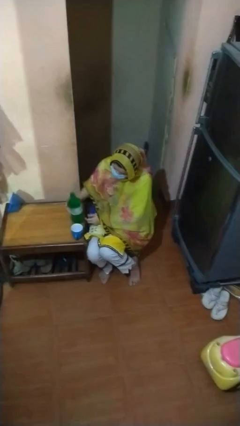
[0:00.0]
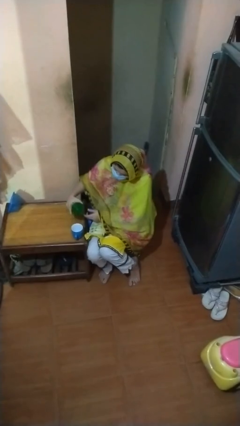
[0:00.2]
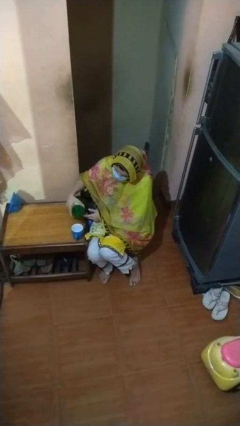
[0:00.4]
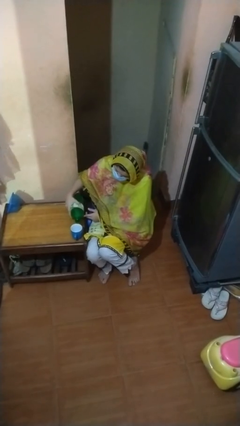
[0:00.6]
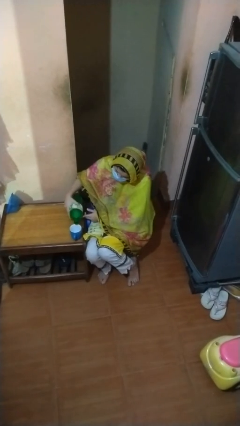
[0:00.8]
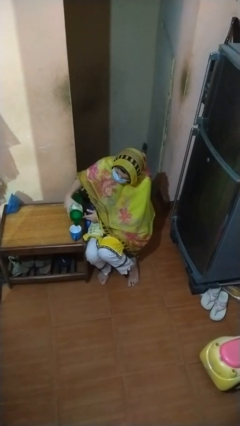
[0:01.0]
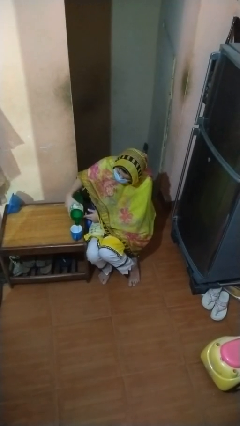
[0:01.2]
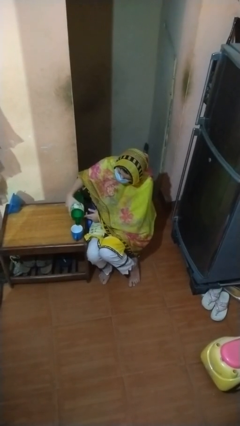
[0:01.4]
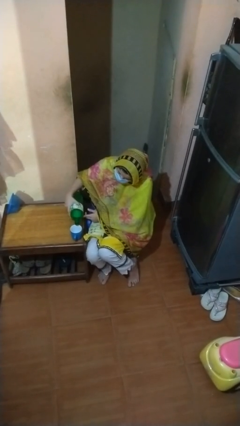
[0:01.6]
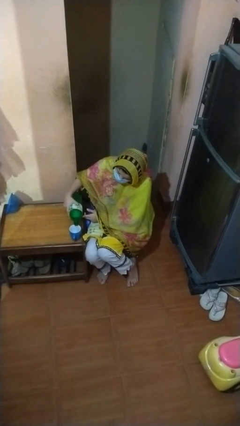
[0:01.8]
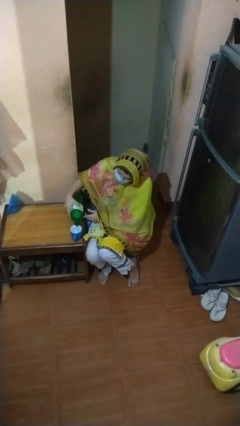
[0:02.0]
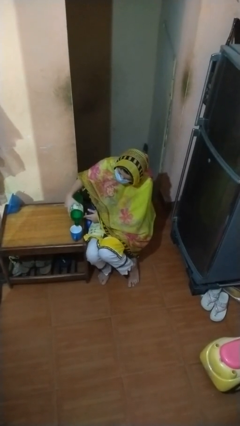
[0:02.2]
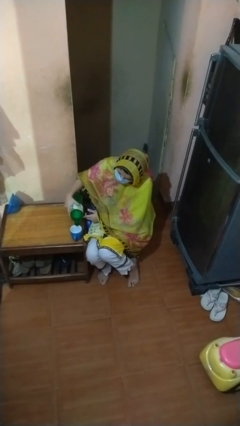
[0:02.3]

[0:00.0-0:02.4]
person pours liquid into cup

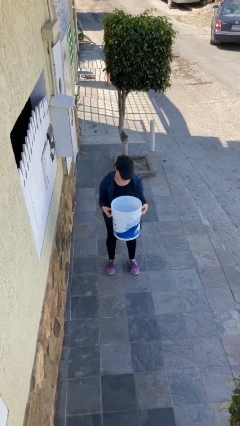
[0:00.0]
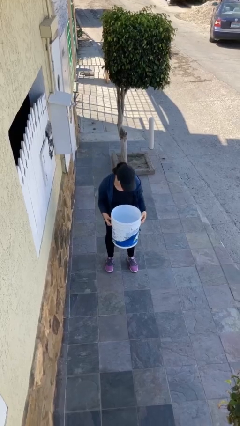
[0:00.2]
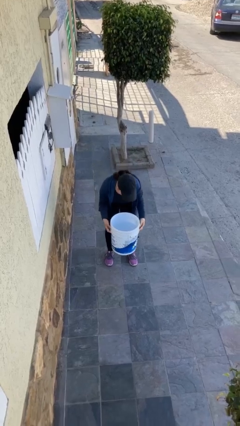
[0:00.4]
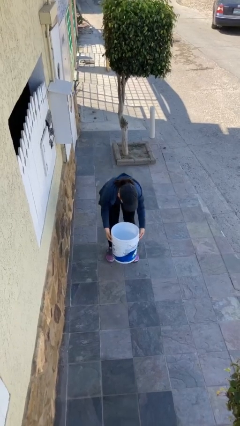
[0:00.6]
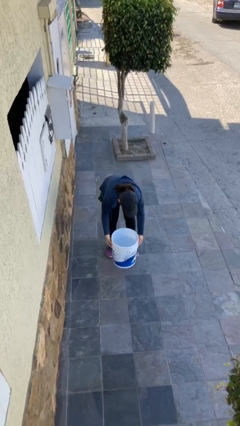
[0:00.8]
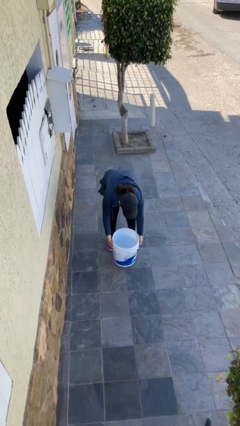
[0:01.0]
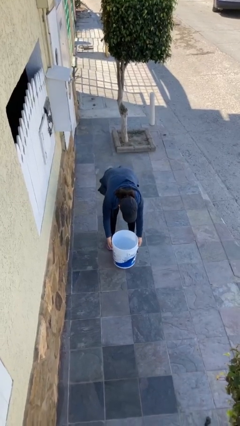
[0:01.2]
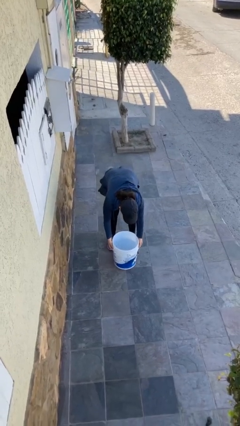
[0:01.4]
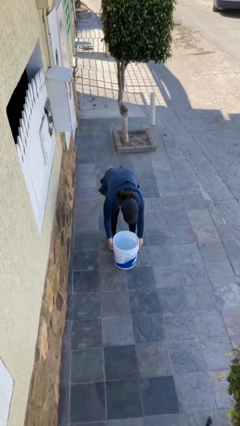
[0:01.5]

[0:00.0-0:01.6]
person puts down object on floor

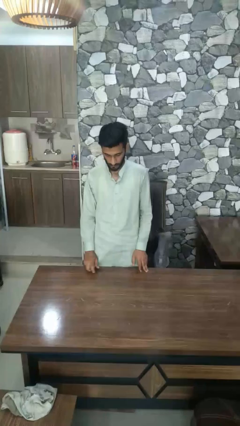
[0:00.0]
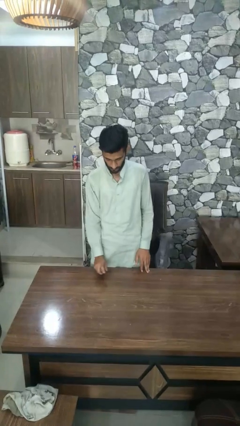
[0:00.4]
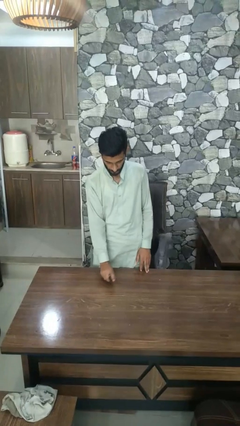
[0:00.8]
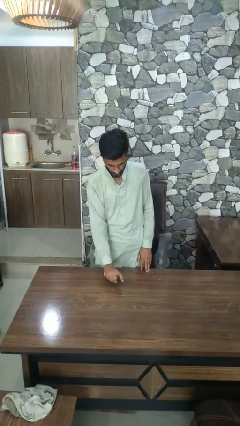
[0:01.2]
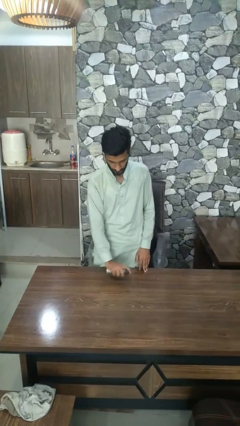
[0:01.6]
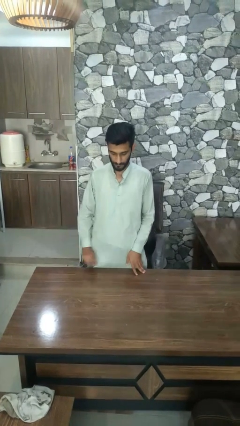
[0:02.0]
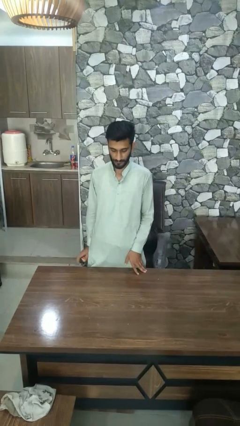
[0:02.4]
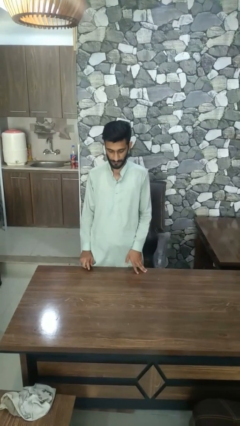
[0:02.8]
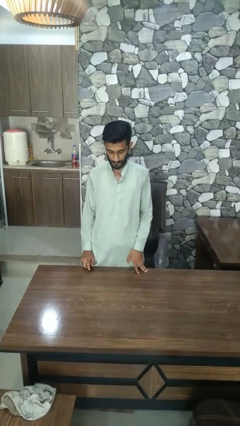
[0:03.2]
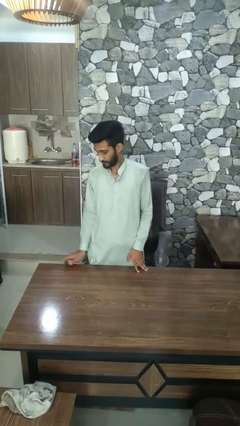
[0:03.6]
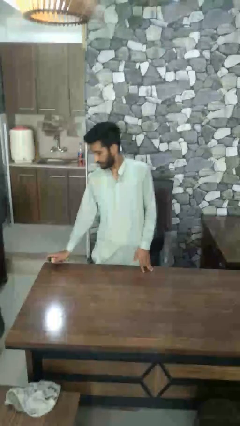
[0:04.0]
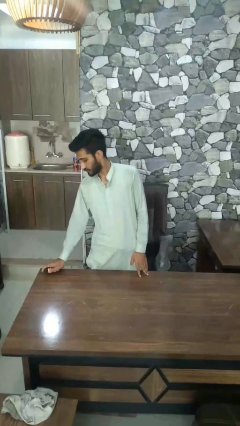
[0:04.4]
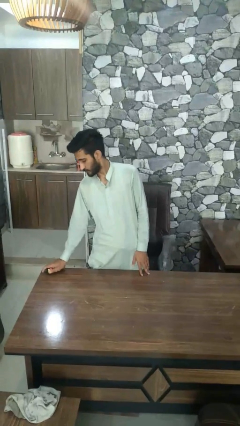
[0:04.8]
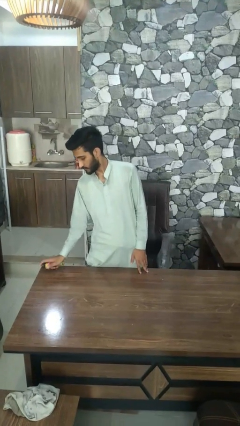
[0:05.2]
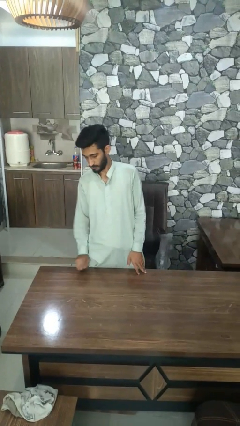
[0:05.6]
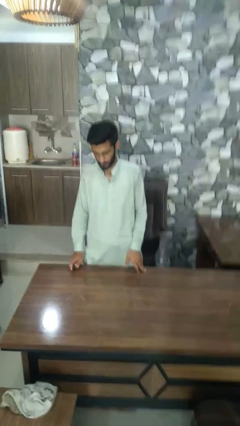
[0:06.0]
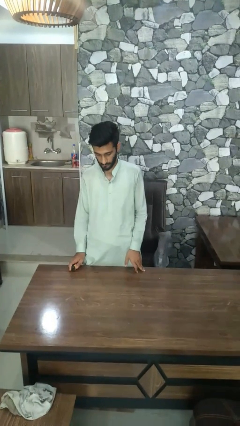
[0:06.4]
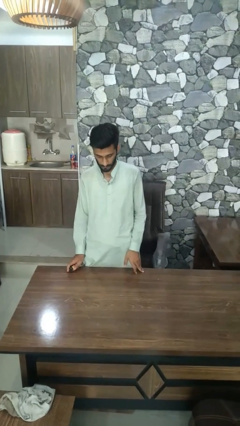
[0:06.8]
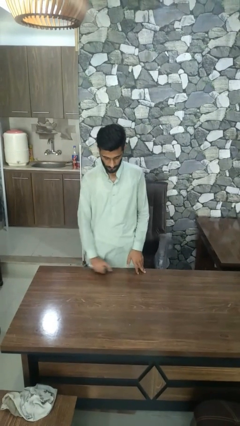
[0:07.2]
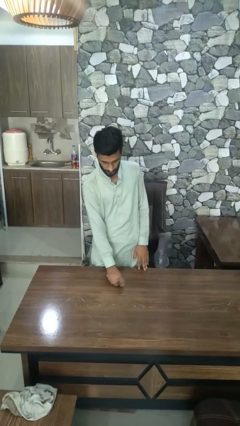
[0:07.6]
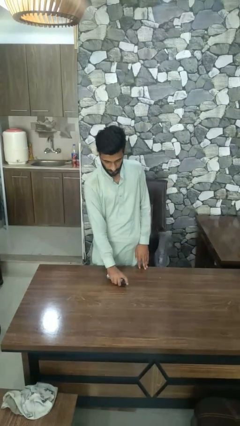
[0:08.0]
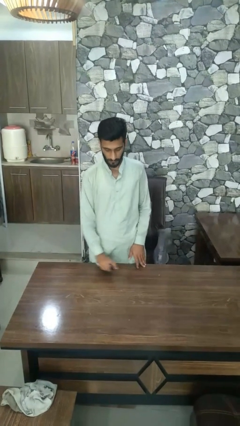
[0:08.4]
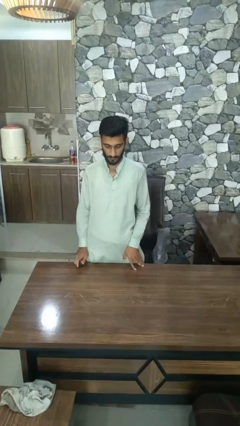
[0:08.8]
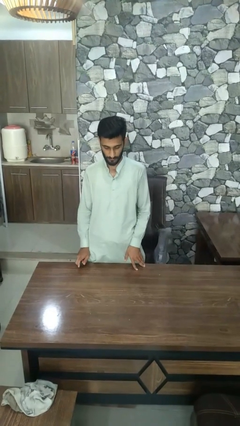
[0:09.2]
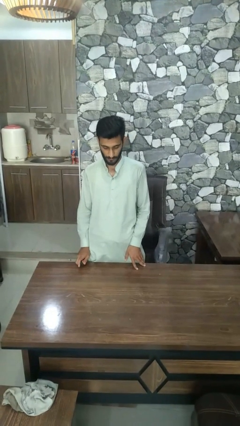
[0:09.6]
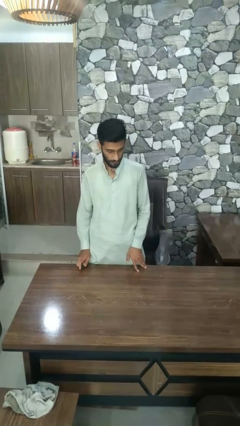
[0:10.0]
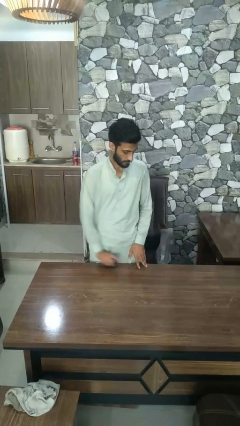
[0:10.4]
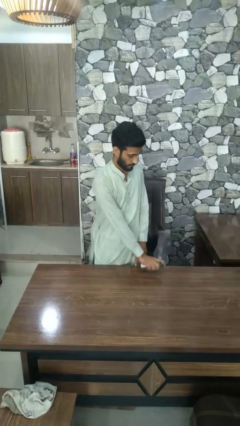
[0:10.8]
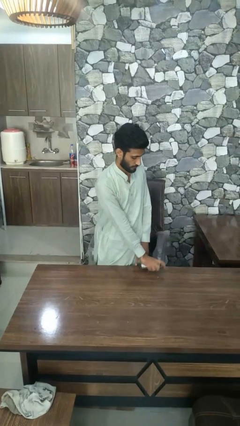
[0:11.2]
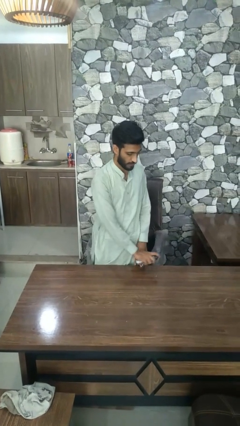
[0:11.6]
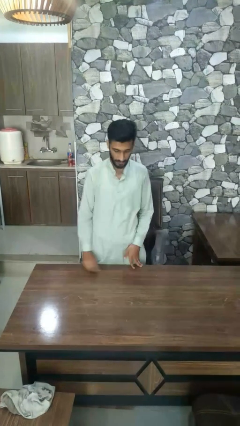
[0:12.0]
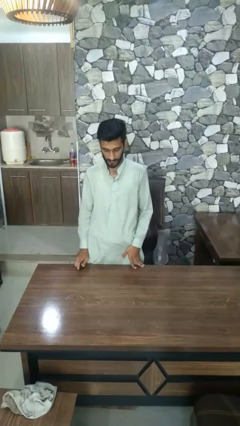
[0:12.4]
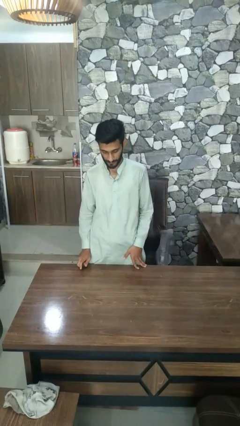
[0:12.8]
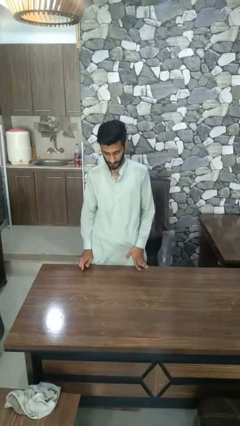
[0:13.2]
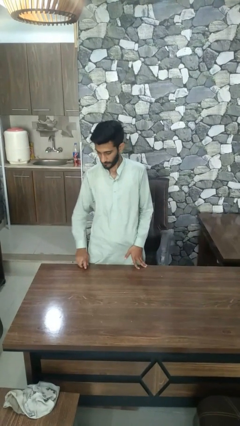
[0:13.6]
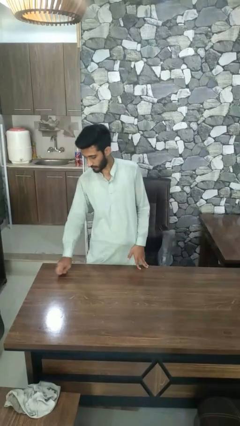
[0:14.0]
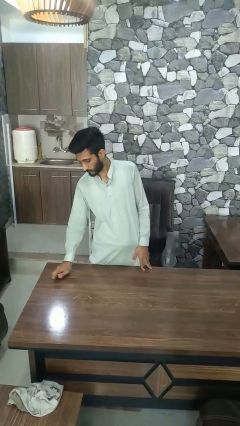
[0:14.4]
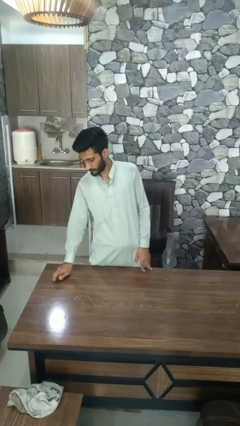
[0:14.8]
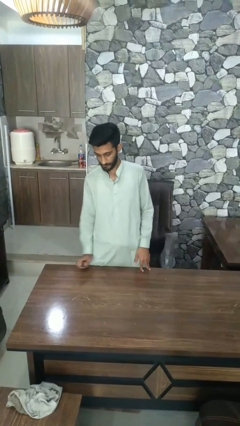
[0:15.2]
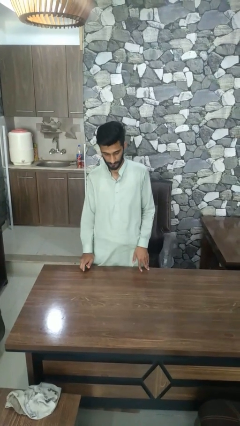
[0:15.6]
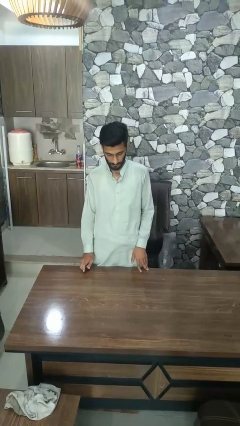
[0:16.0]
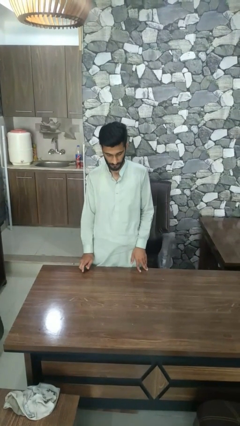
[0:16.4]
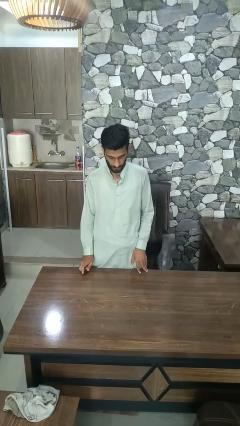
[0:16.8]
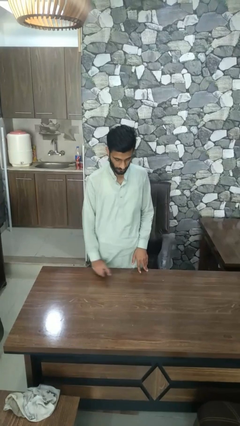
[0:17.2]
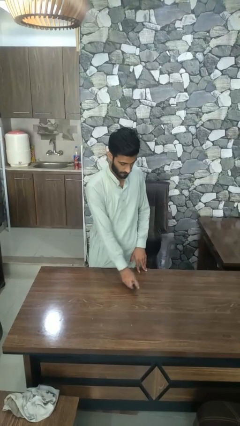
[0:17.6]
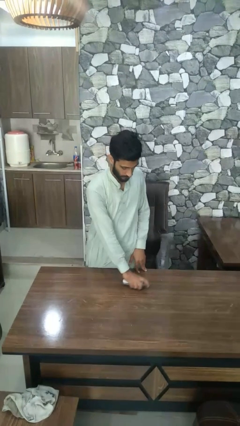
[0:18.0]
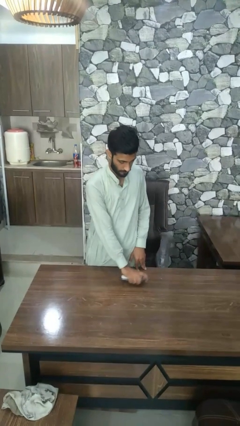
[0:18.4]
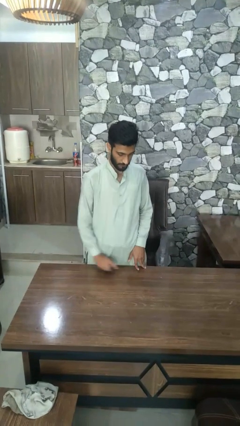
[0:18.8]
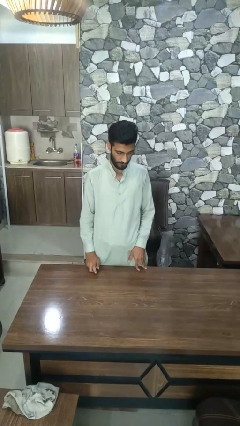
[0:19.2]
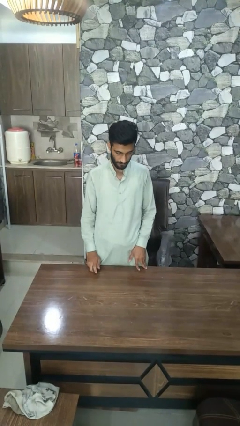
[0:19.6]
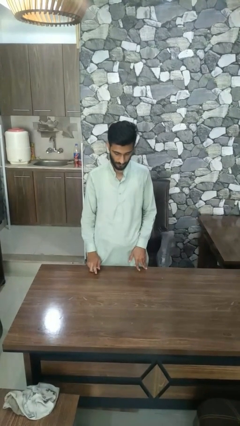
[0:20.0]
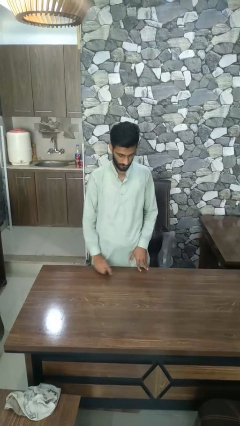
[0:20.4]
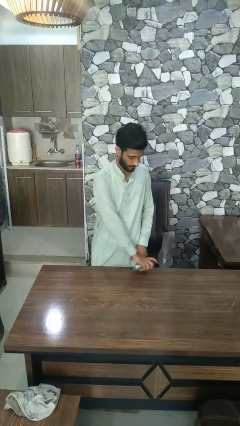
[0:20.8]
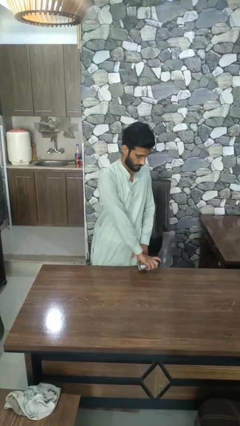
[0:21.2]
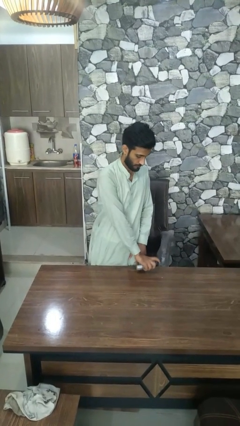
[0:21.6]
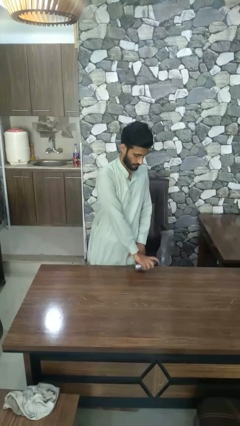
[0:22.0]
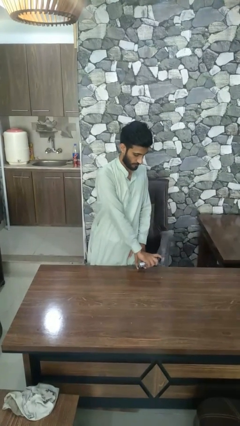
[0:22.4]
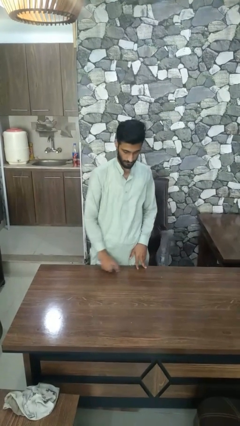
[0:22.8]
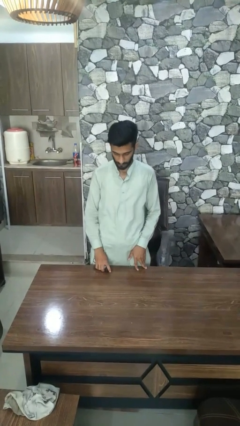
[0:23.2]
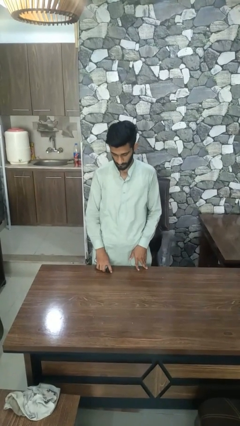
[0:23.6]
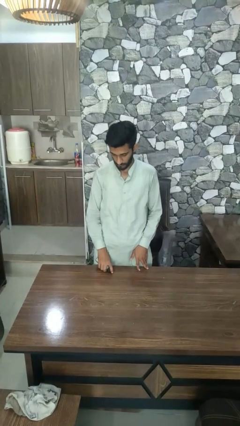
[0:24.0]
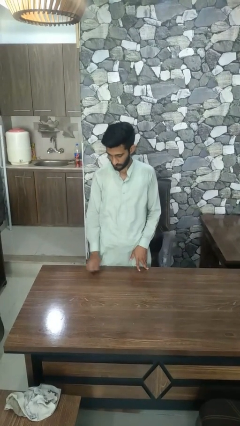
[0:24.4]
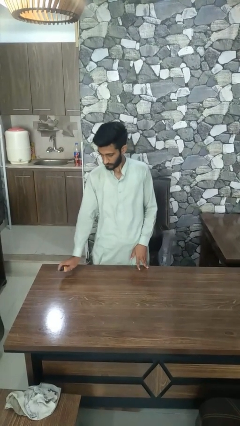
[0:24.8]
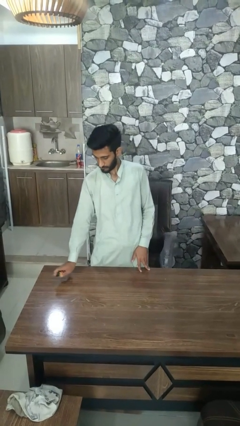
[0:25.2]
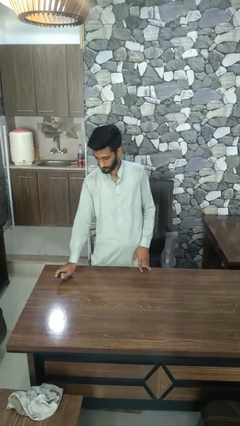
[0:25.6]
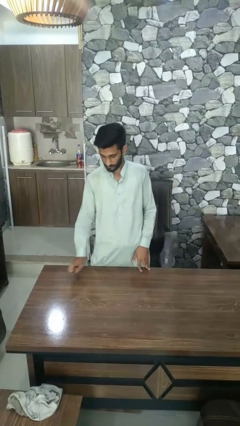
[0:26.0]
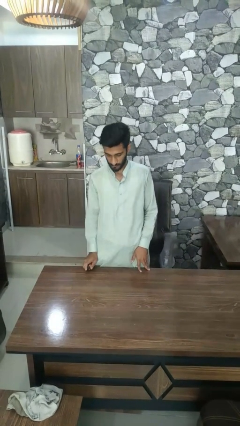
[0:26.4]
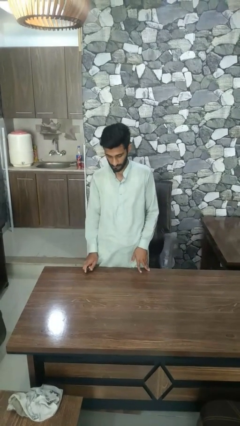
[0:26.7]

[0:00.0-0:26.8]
person sprays from bottle

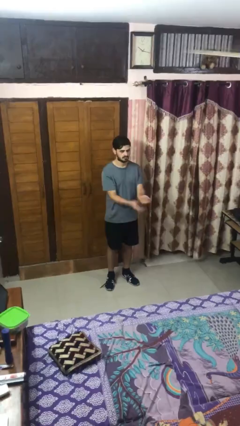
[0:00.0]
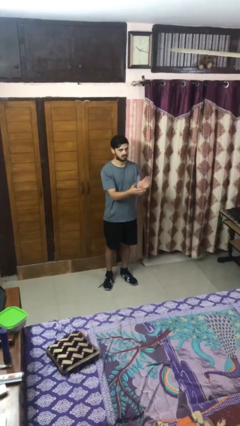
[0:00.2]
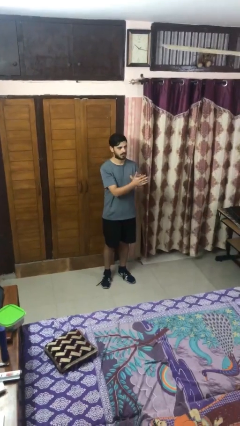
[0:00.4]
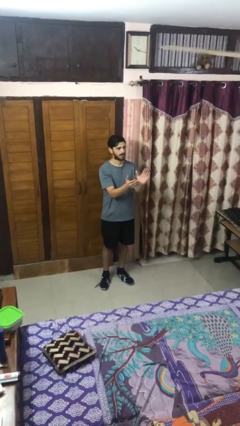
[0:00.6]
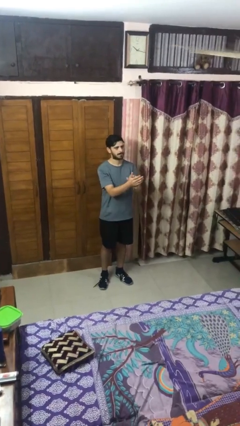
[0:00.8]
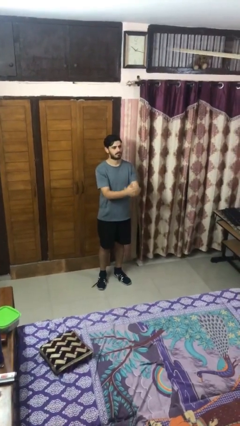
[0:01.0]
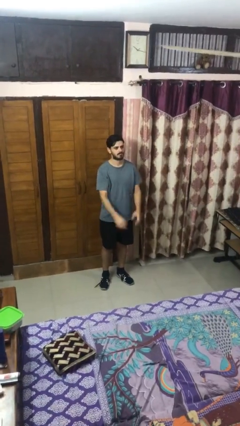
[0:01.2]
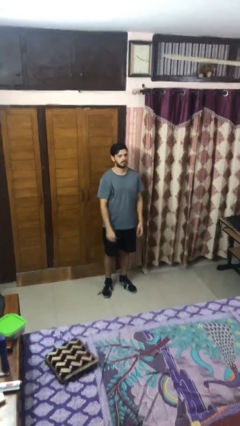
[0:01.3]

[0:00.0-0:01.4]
person claps hands
